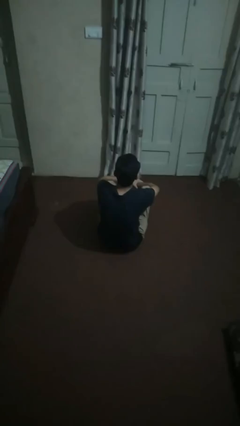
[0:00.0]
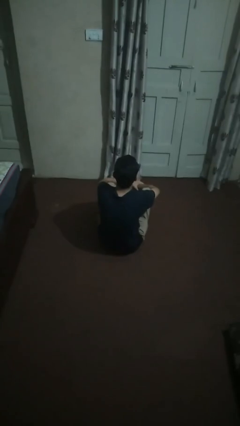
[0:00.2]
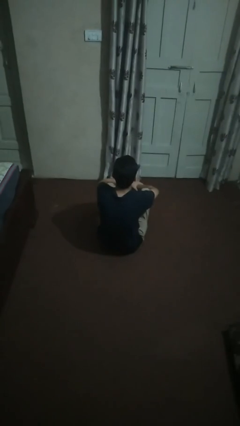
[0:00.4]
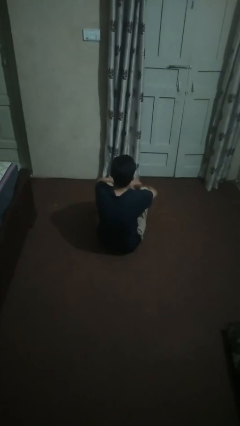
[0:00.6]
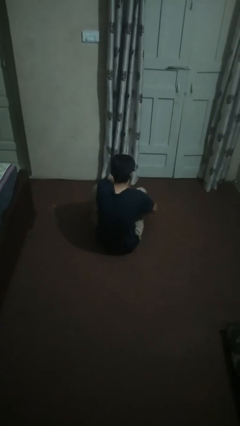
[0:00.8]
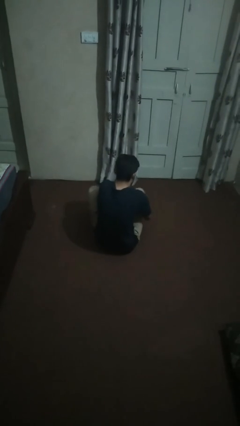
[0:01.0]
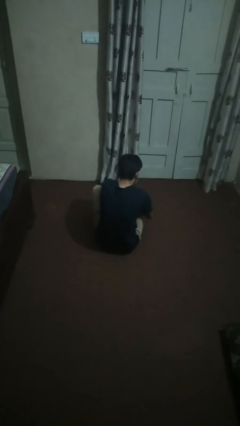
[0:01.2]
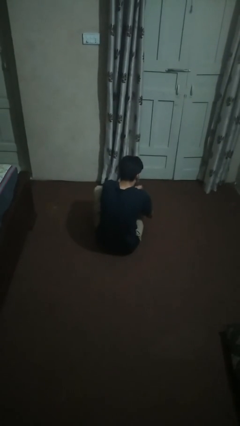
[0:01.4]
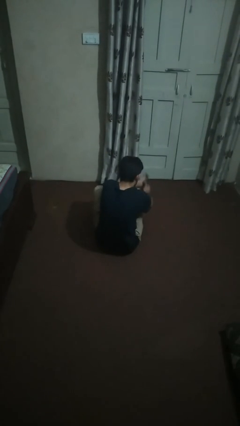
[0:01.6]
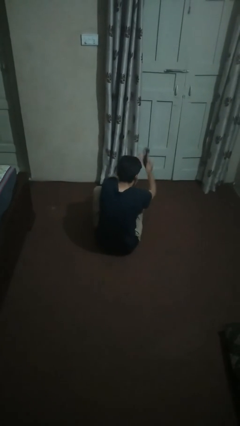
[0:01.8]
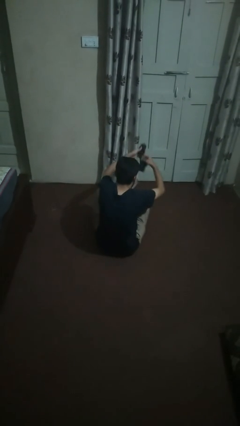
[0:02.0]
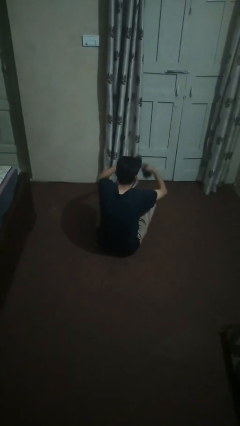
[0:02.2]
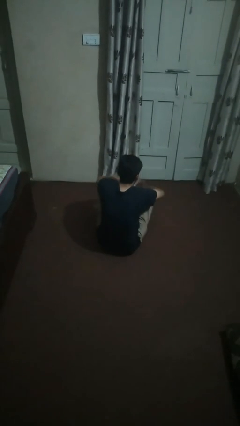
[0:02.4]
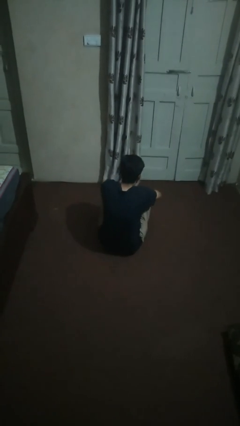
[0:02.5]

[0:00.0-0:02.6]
person takes off socks

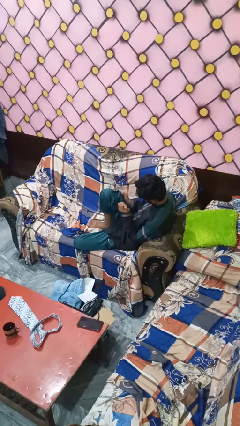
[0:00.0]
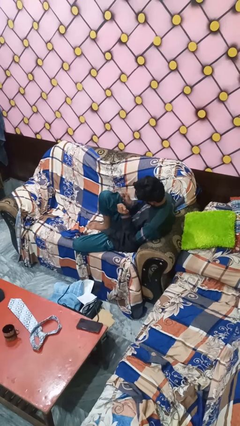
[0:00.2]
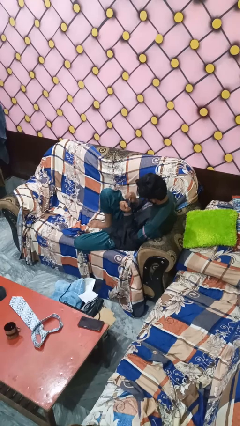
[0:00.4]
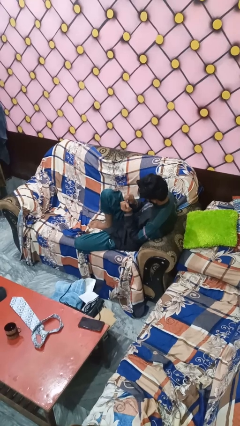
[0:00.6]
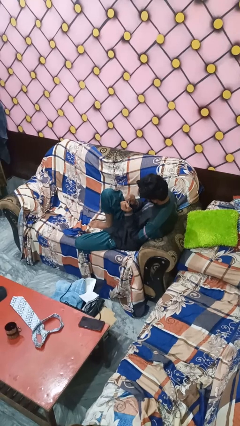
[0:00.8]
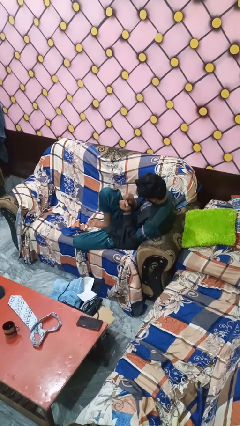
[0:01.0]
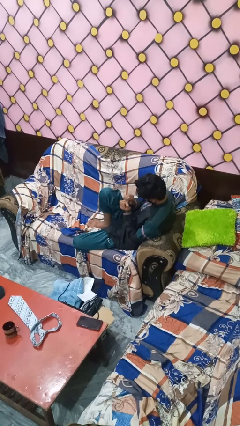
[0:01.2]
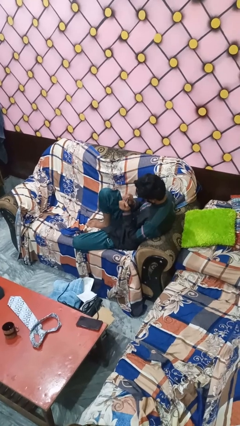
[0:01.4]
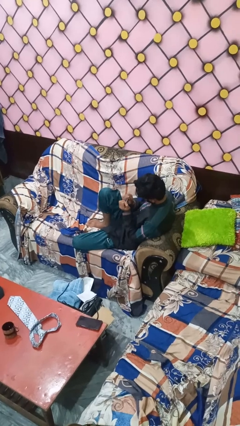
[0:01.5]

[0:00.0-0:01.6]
person paints fingernails

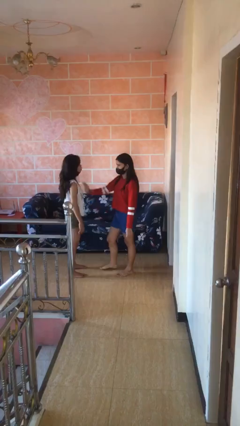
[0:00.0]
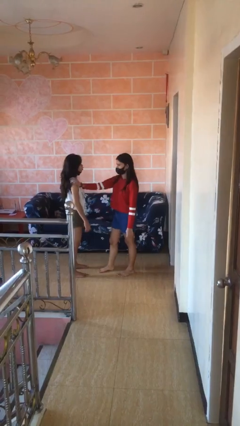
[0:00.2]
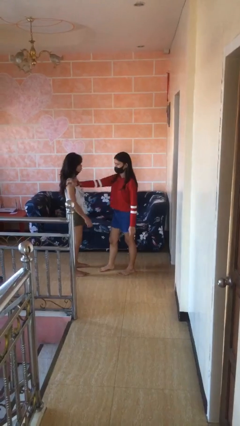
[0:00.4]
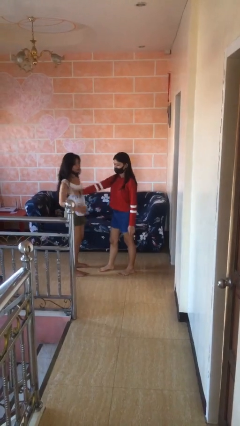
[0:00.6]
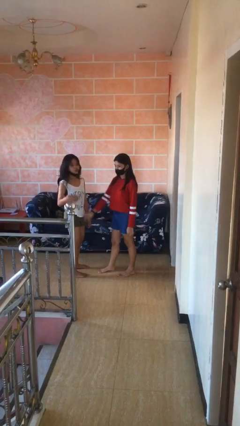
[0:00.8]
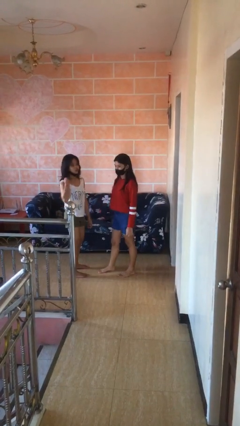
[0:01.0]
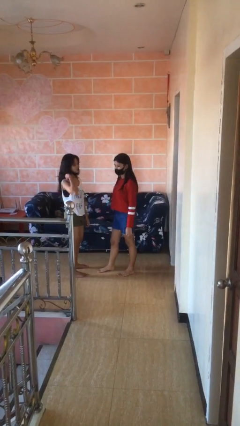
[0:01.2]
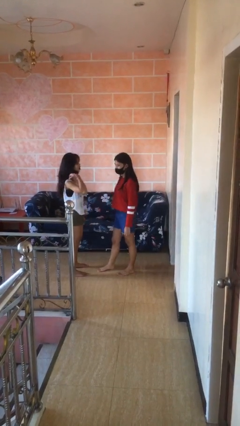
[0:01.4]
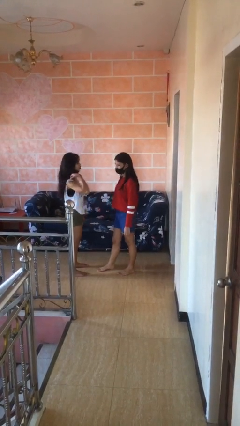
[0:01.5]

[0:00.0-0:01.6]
person shoves person

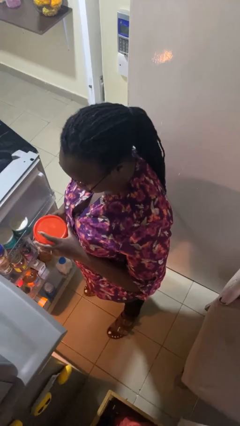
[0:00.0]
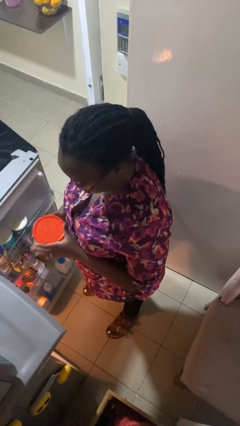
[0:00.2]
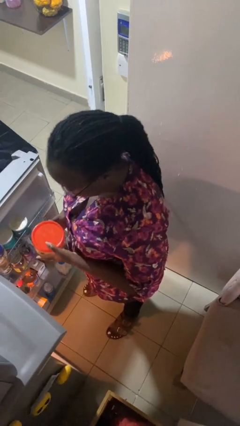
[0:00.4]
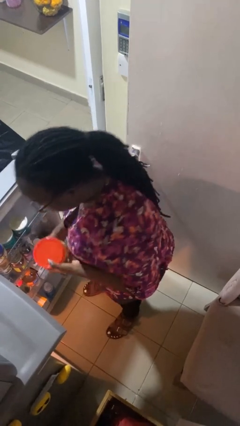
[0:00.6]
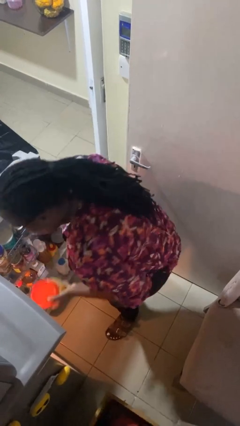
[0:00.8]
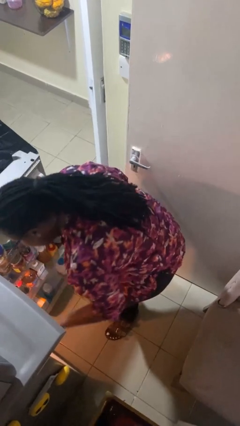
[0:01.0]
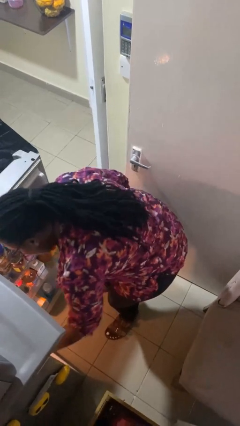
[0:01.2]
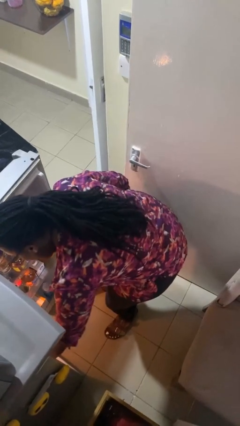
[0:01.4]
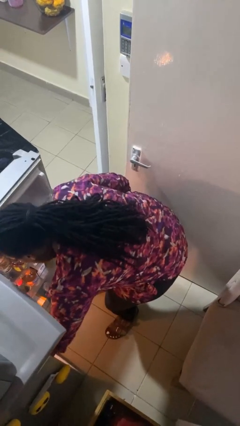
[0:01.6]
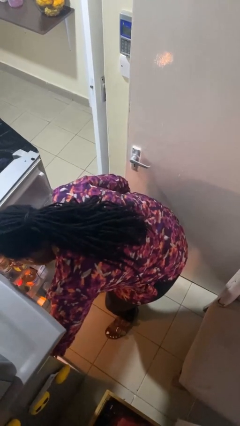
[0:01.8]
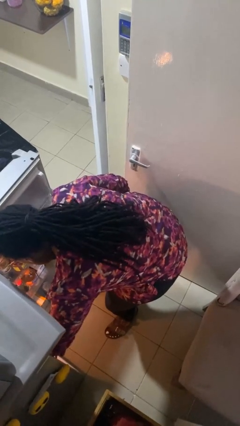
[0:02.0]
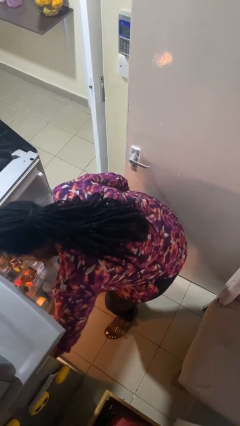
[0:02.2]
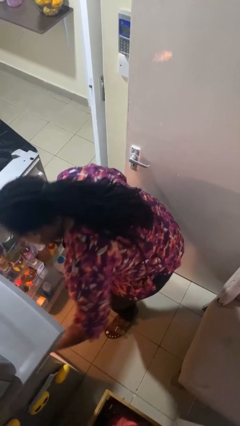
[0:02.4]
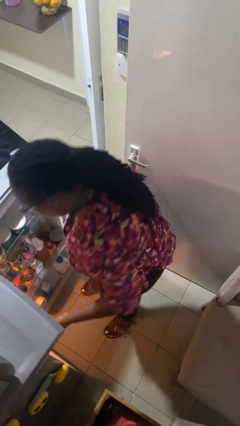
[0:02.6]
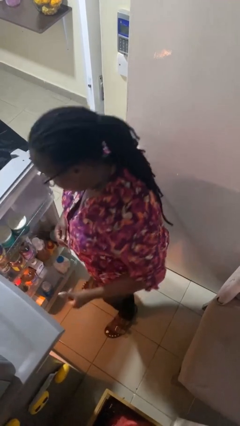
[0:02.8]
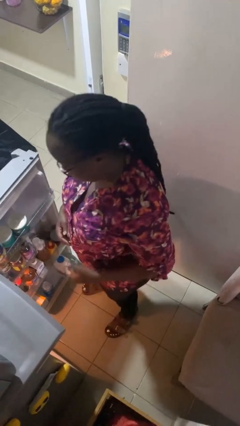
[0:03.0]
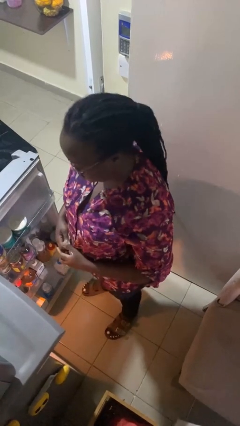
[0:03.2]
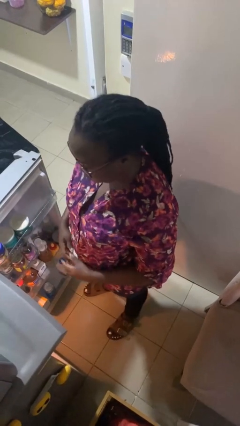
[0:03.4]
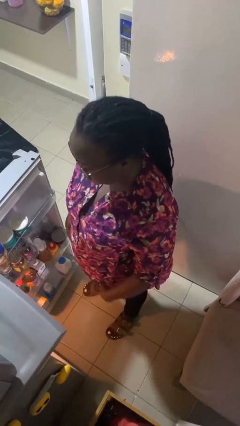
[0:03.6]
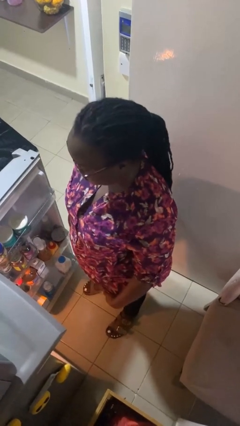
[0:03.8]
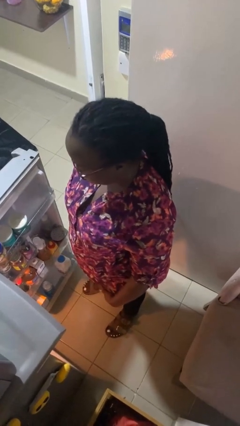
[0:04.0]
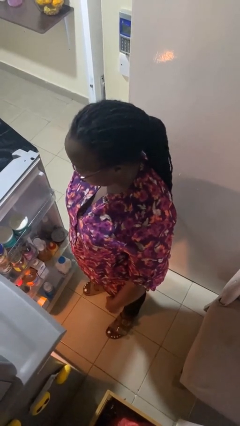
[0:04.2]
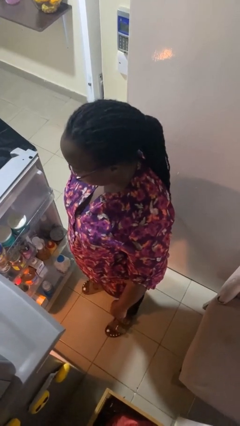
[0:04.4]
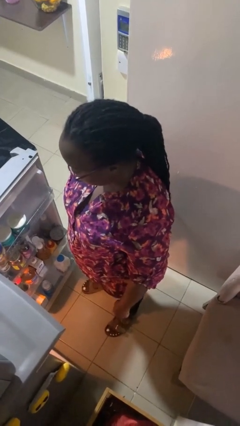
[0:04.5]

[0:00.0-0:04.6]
person puts object into refrigerator

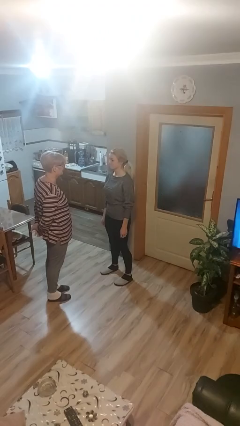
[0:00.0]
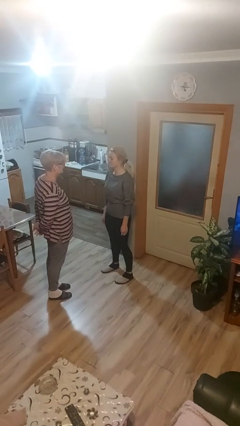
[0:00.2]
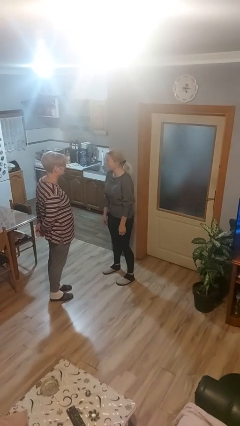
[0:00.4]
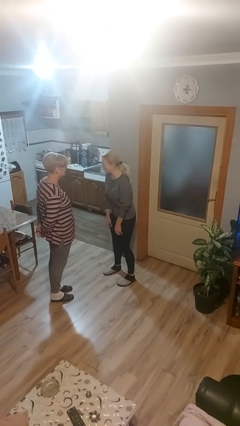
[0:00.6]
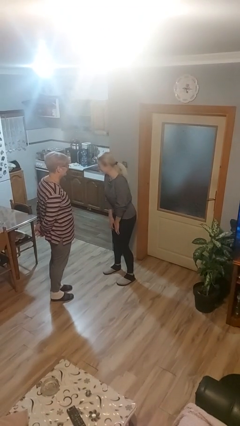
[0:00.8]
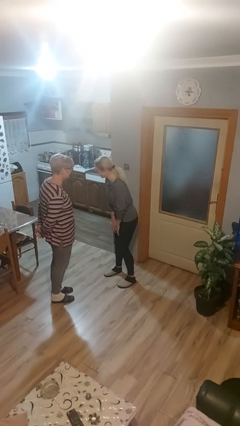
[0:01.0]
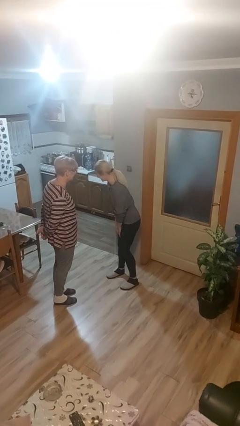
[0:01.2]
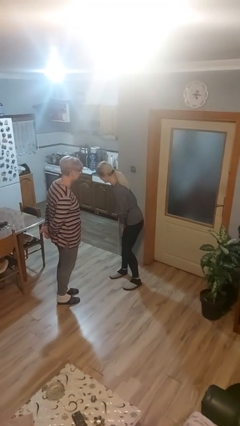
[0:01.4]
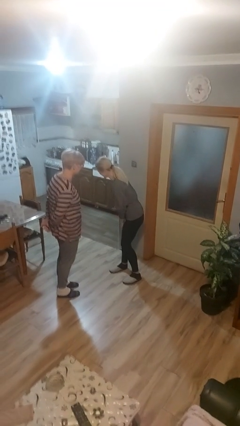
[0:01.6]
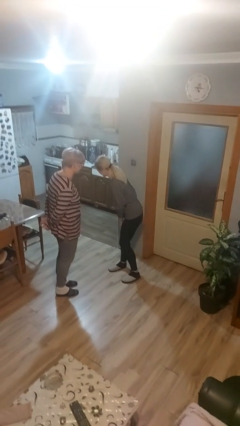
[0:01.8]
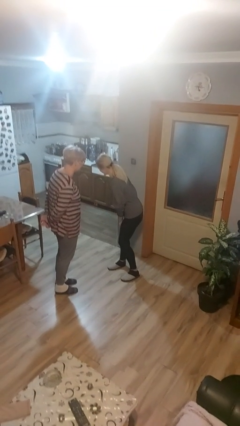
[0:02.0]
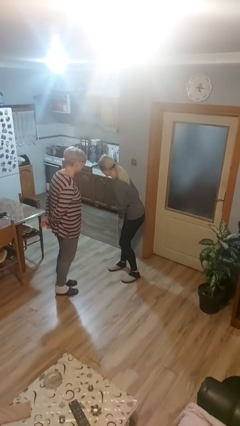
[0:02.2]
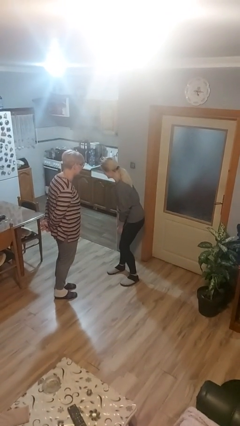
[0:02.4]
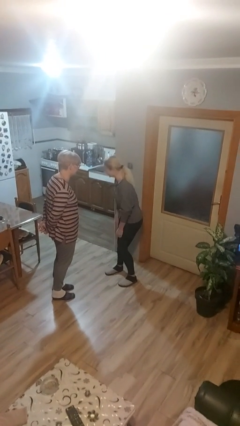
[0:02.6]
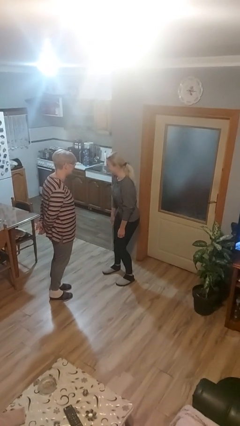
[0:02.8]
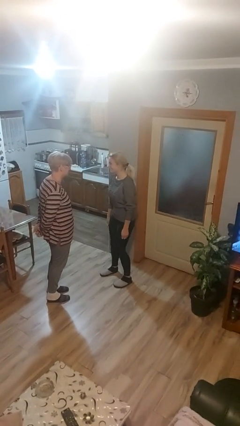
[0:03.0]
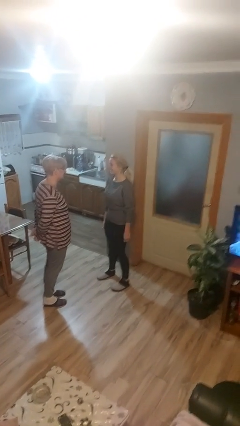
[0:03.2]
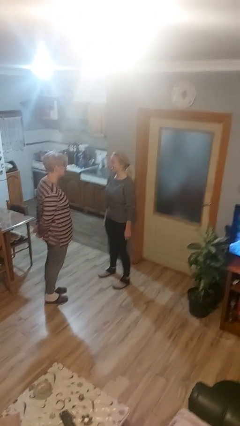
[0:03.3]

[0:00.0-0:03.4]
person laughs with person

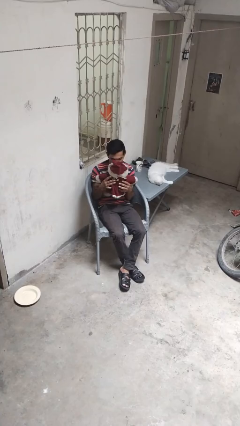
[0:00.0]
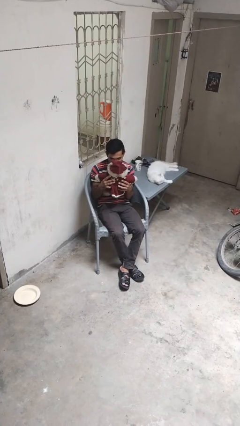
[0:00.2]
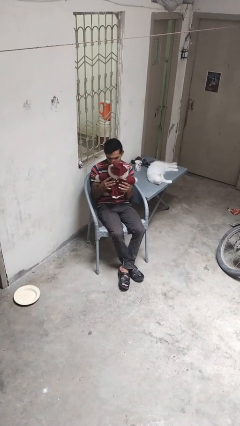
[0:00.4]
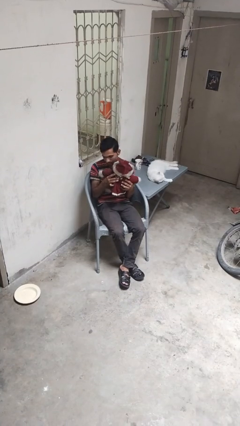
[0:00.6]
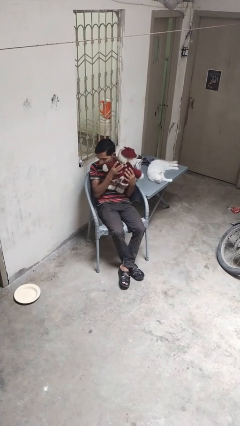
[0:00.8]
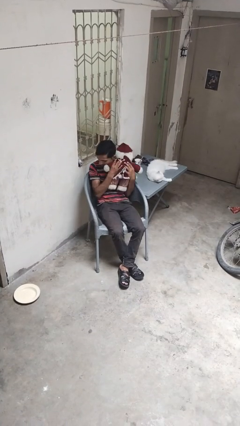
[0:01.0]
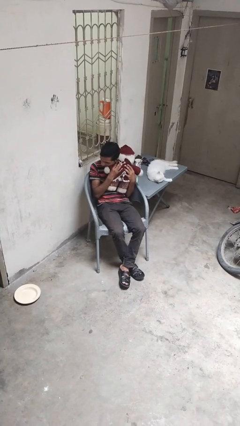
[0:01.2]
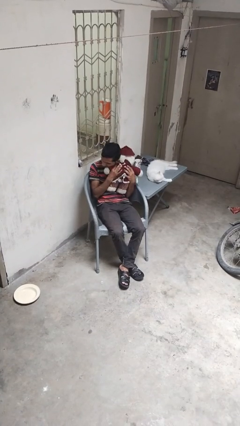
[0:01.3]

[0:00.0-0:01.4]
person hugs stuffed animal

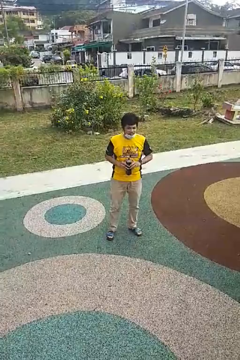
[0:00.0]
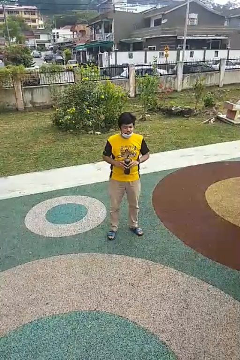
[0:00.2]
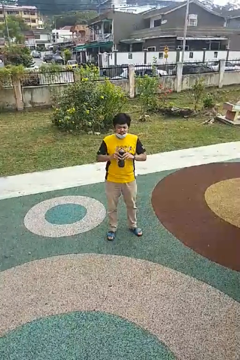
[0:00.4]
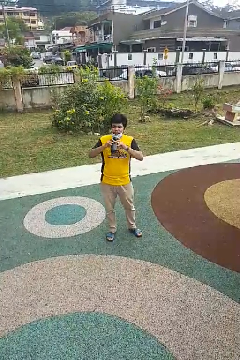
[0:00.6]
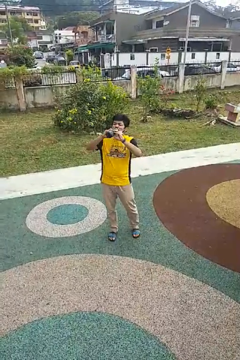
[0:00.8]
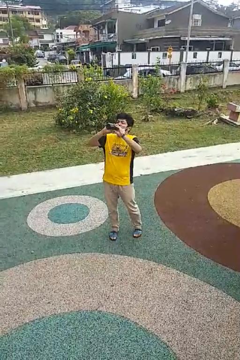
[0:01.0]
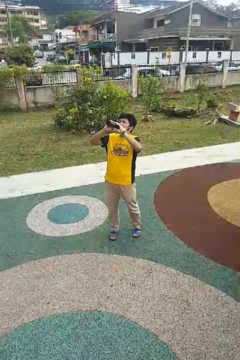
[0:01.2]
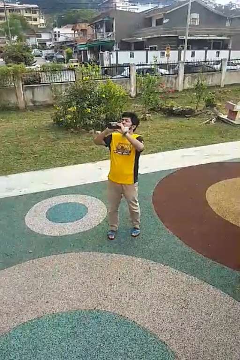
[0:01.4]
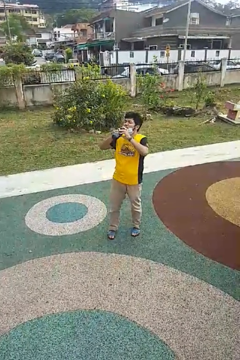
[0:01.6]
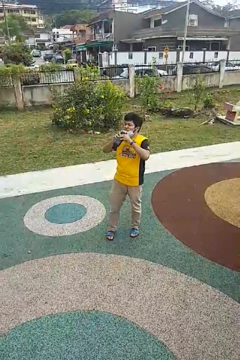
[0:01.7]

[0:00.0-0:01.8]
person drinks from bottle

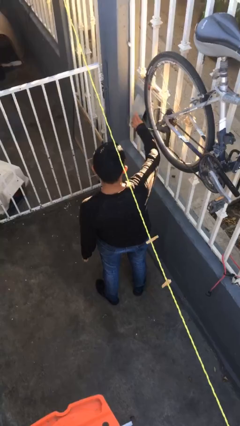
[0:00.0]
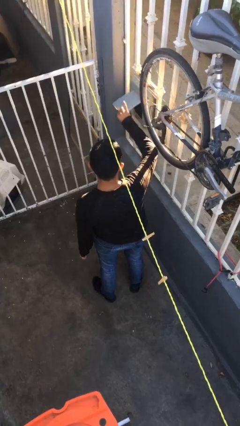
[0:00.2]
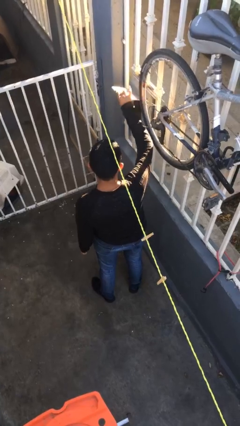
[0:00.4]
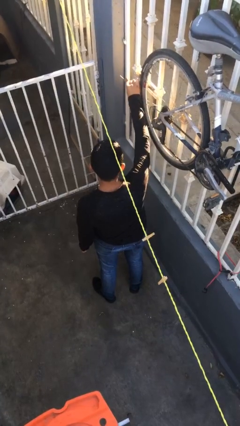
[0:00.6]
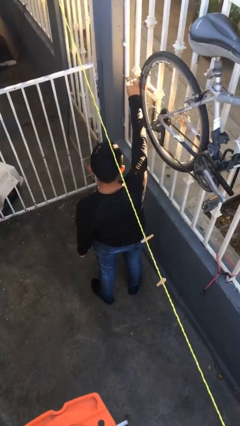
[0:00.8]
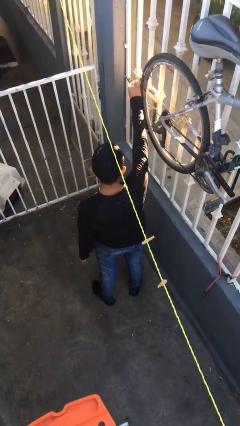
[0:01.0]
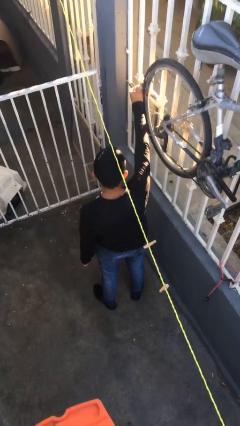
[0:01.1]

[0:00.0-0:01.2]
person opens mailbox
